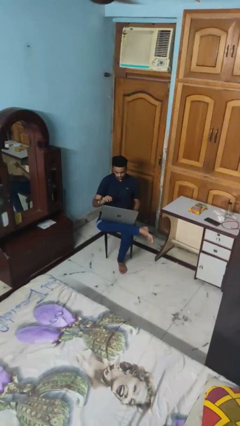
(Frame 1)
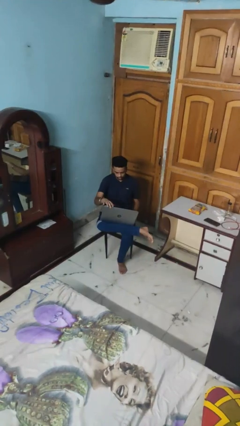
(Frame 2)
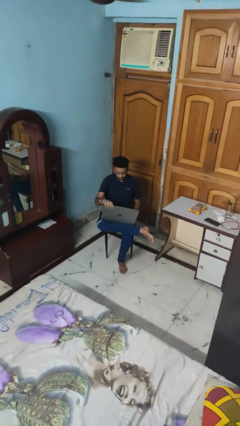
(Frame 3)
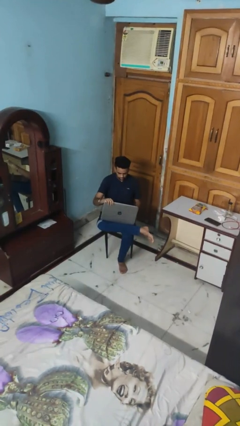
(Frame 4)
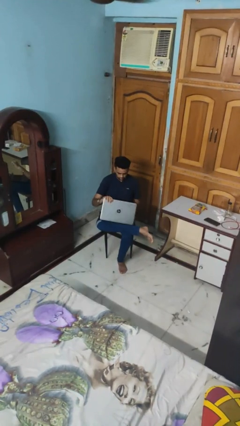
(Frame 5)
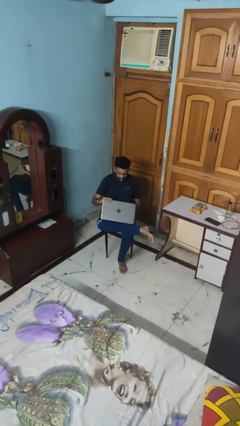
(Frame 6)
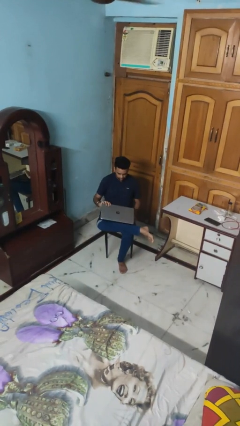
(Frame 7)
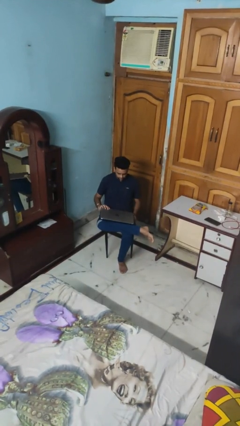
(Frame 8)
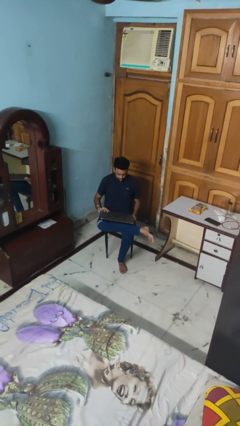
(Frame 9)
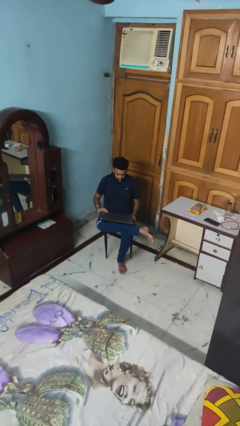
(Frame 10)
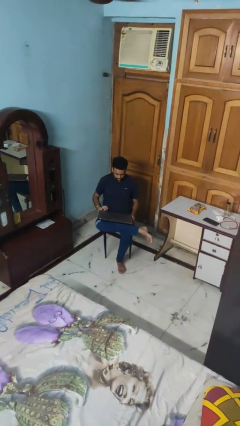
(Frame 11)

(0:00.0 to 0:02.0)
person closes laptop

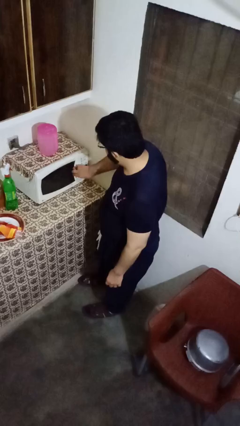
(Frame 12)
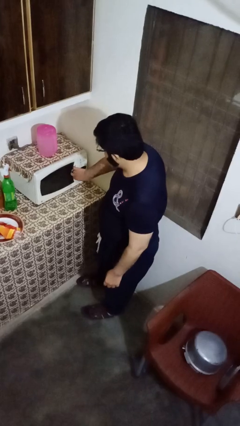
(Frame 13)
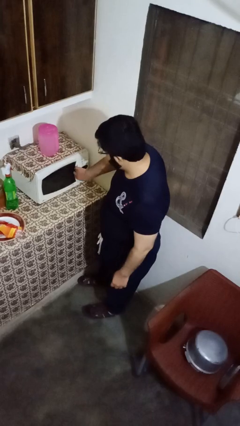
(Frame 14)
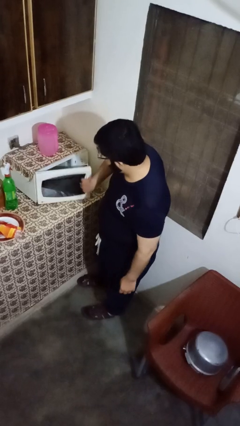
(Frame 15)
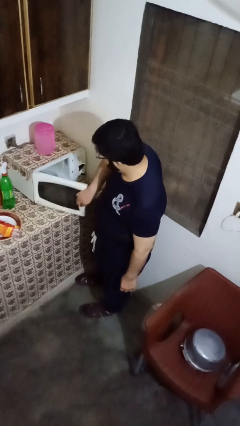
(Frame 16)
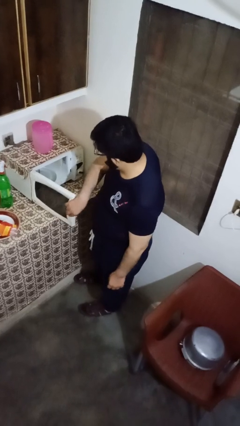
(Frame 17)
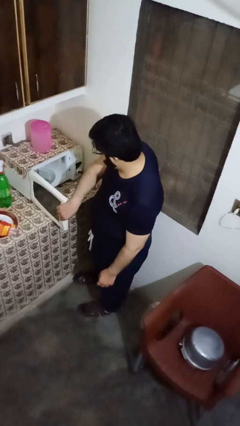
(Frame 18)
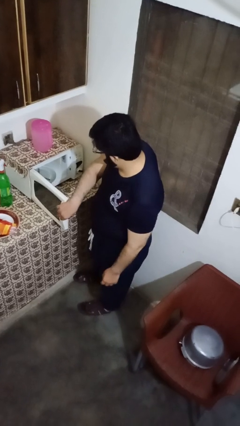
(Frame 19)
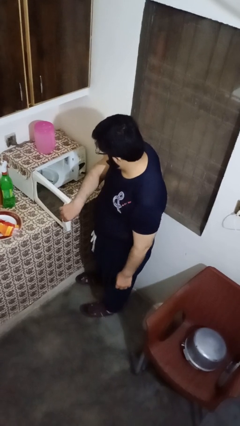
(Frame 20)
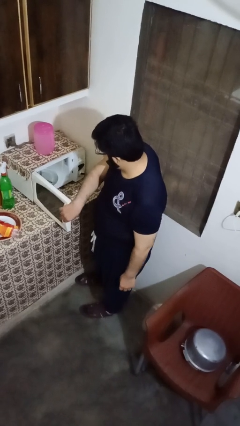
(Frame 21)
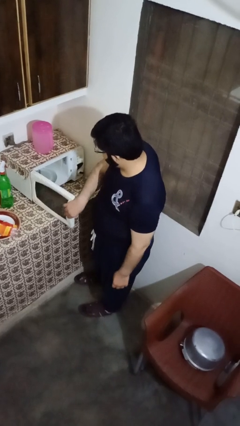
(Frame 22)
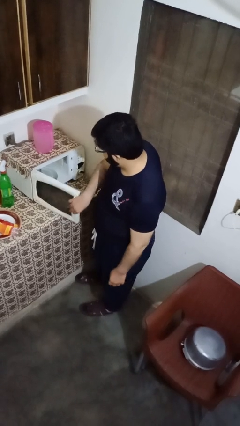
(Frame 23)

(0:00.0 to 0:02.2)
person opens oven door

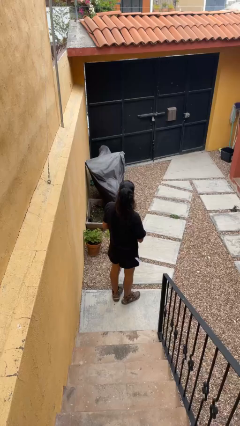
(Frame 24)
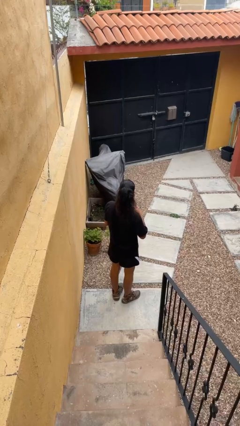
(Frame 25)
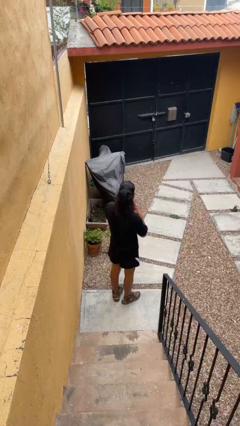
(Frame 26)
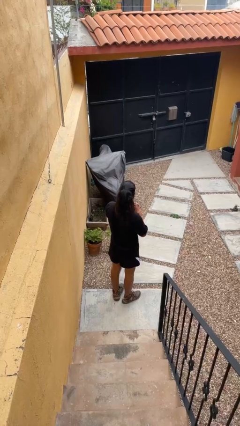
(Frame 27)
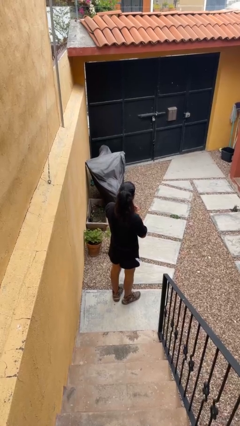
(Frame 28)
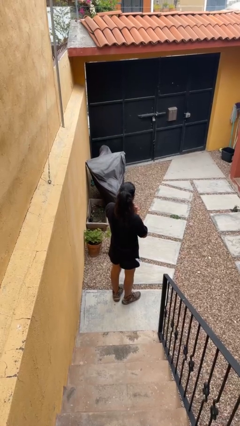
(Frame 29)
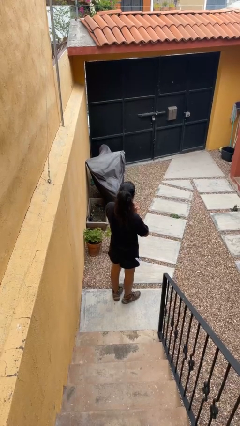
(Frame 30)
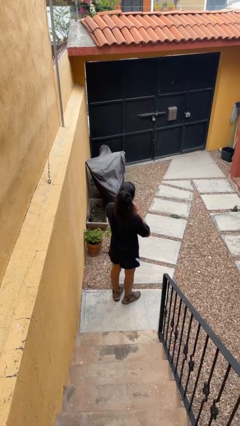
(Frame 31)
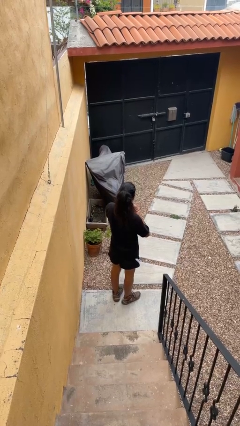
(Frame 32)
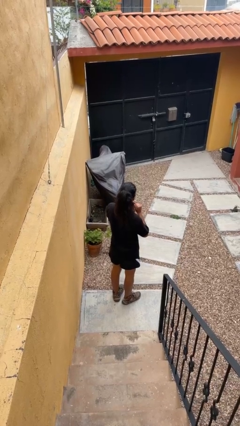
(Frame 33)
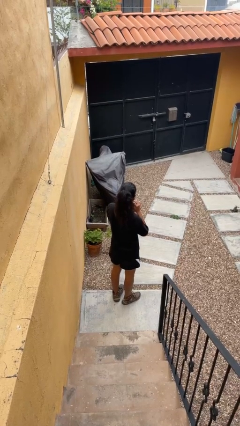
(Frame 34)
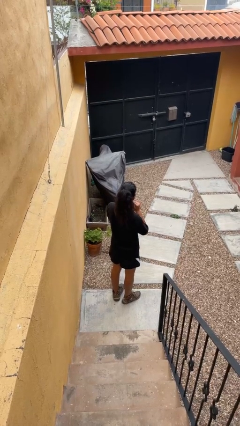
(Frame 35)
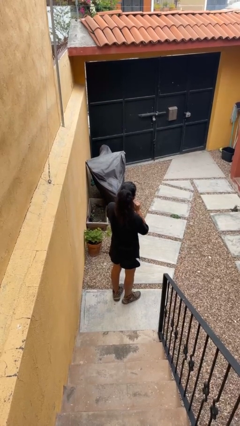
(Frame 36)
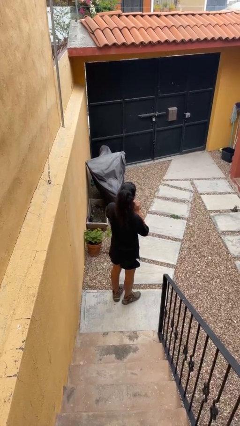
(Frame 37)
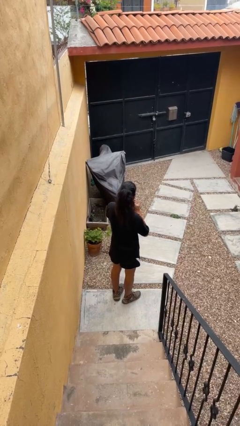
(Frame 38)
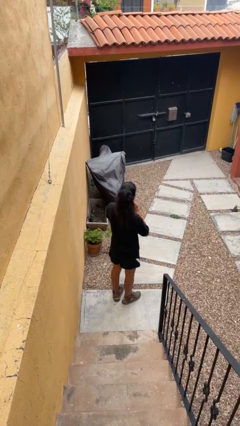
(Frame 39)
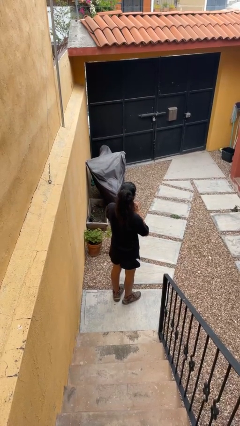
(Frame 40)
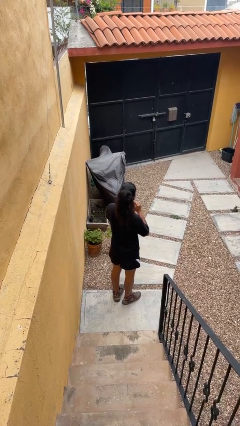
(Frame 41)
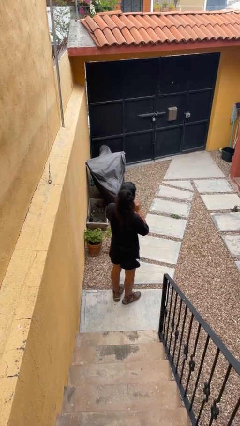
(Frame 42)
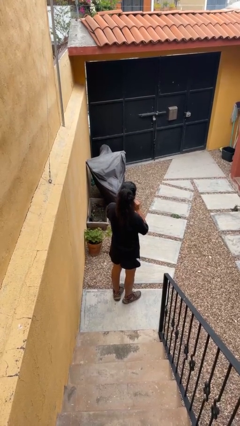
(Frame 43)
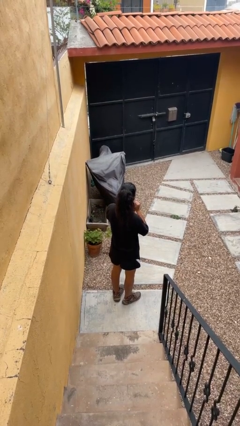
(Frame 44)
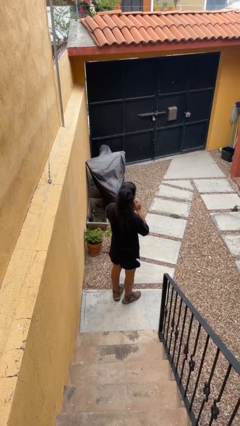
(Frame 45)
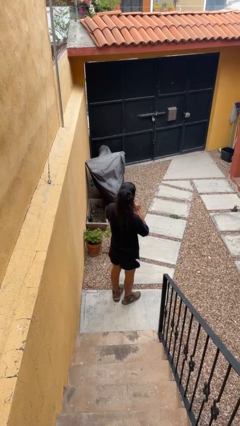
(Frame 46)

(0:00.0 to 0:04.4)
person cracks knuckles

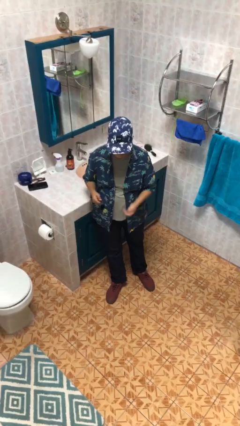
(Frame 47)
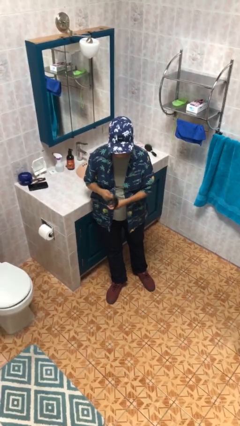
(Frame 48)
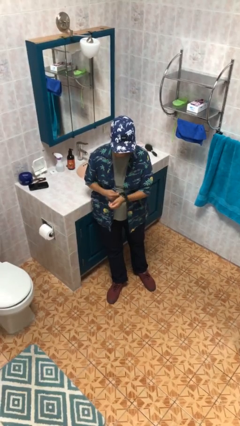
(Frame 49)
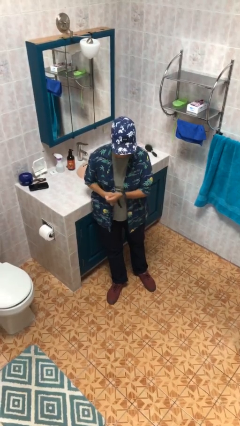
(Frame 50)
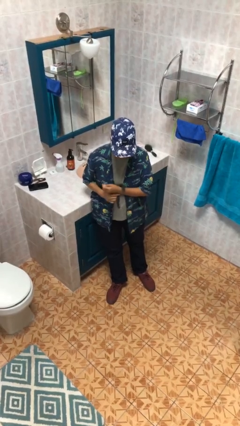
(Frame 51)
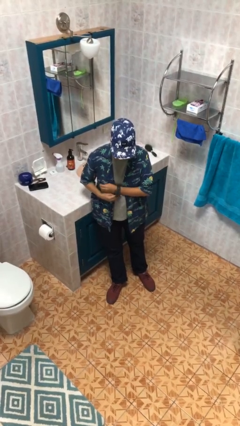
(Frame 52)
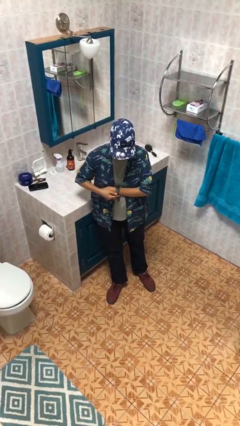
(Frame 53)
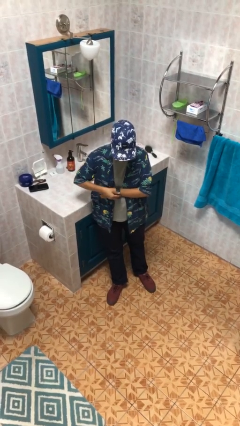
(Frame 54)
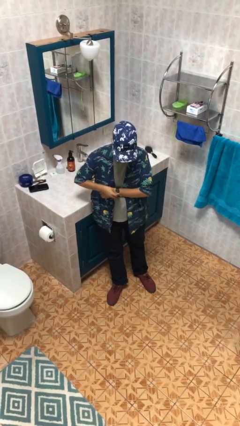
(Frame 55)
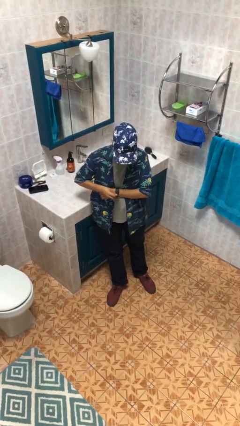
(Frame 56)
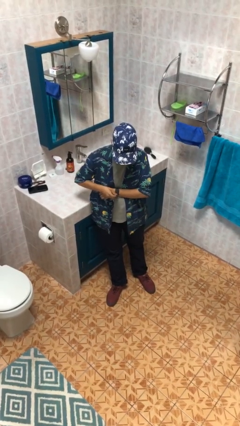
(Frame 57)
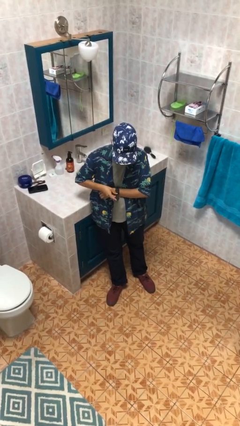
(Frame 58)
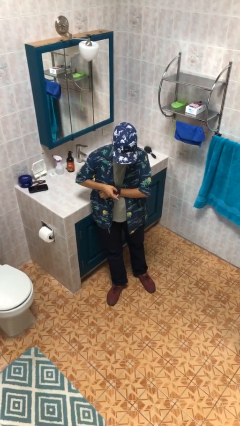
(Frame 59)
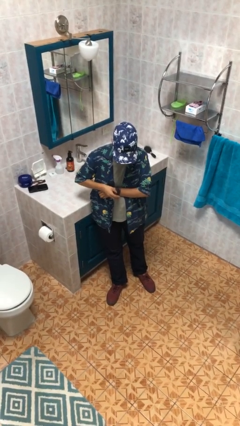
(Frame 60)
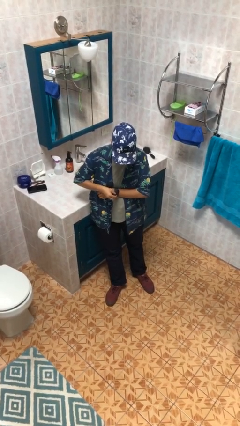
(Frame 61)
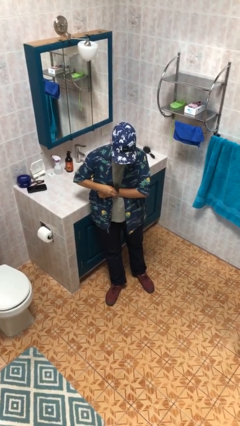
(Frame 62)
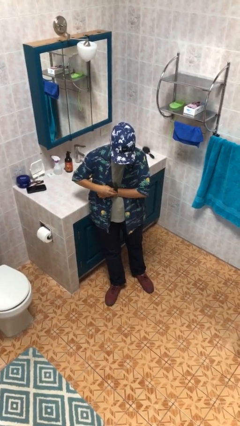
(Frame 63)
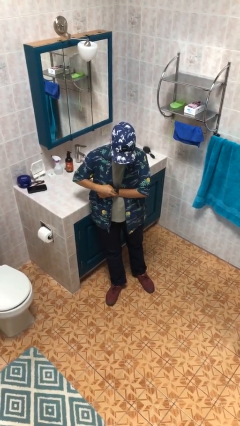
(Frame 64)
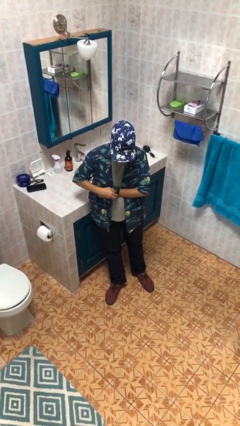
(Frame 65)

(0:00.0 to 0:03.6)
person puts on wristwatch

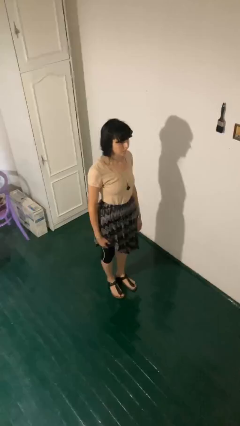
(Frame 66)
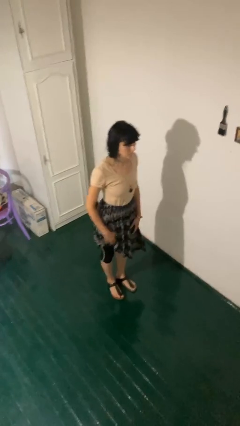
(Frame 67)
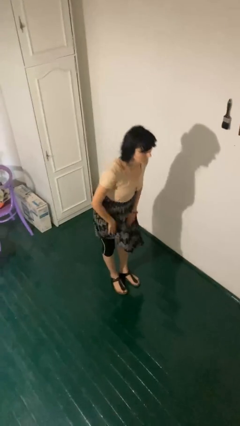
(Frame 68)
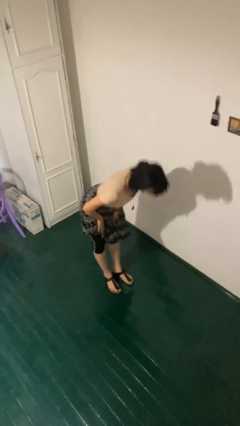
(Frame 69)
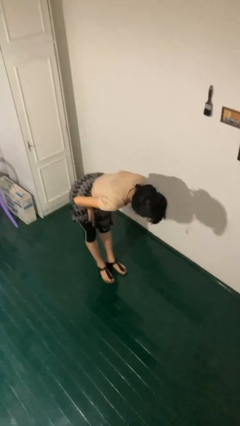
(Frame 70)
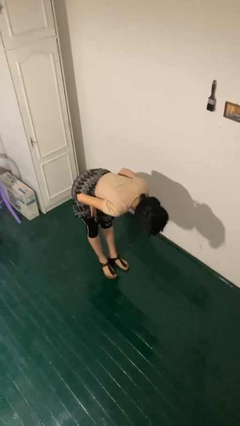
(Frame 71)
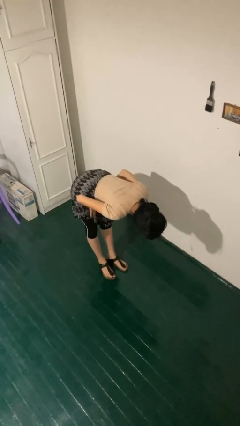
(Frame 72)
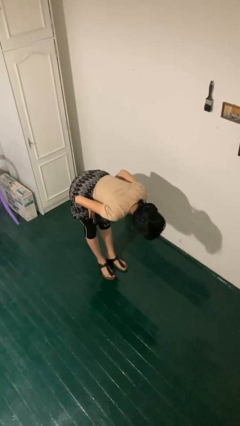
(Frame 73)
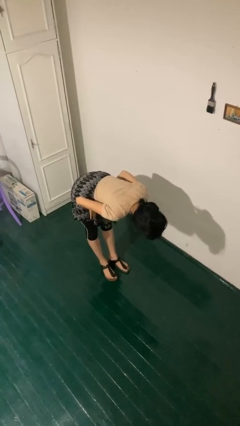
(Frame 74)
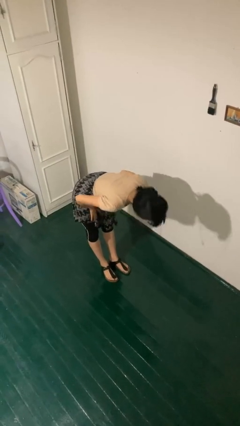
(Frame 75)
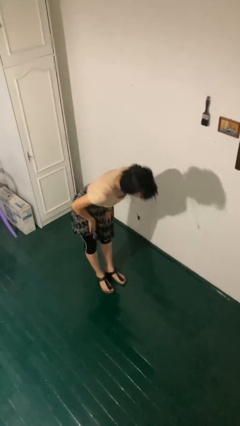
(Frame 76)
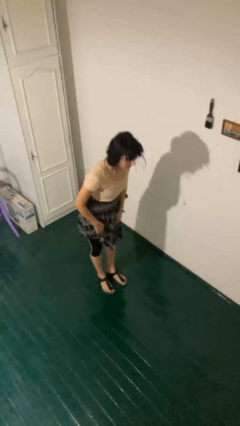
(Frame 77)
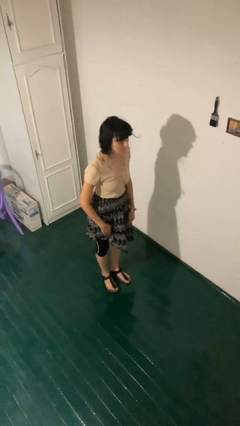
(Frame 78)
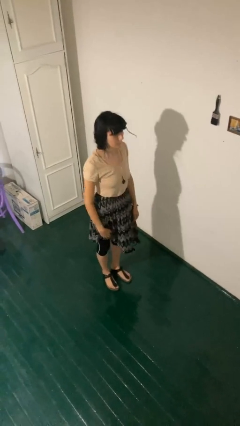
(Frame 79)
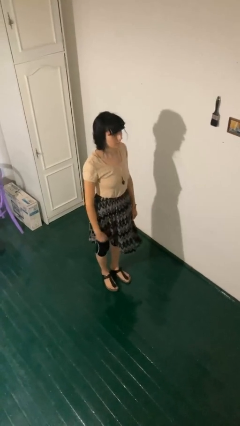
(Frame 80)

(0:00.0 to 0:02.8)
person bows

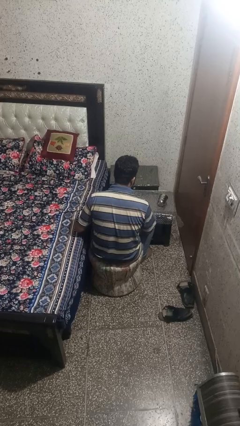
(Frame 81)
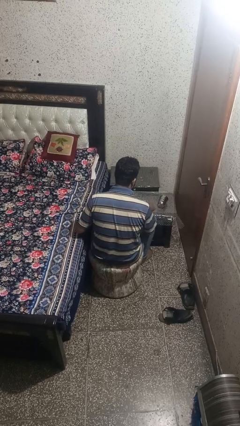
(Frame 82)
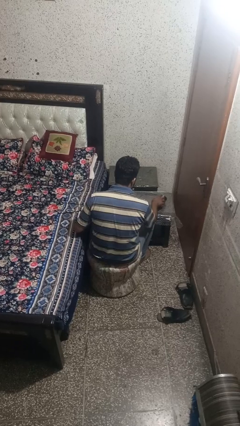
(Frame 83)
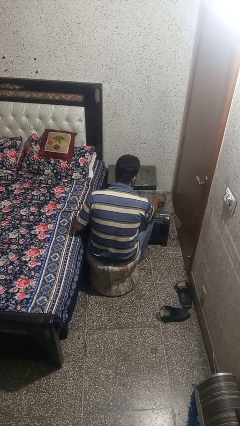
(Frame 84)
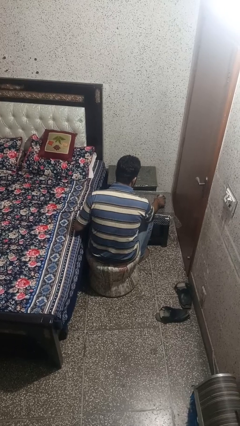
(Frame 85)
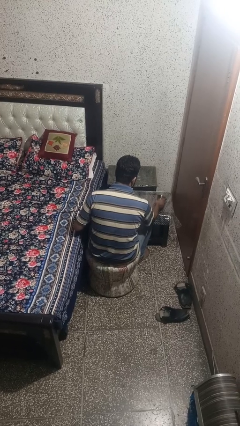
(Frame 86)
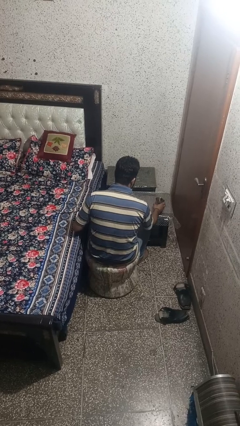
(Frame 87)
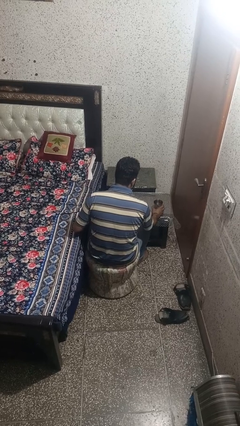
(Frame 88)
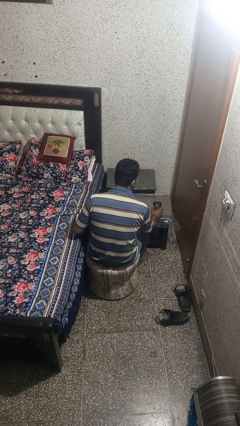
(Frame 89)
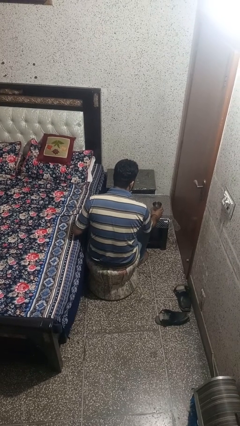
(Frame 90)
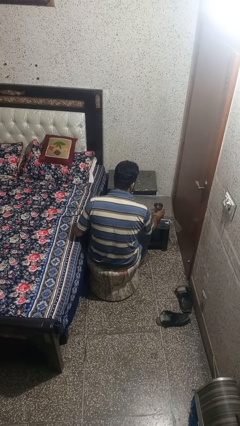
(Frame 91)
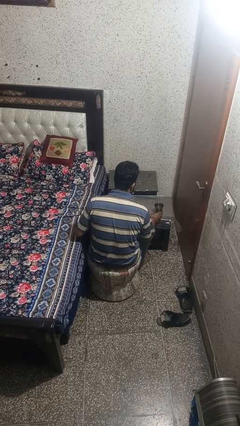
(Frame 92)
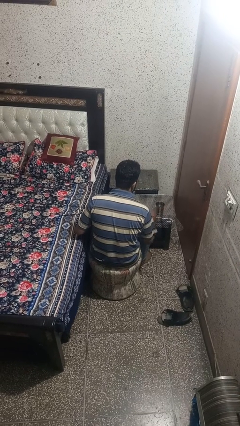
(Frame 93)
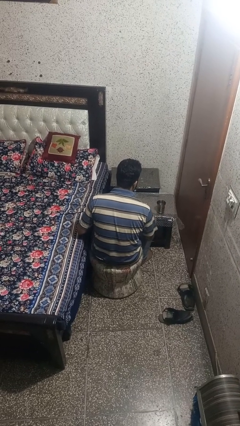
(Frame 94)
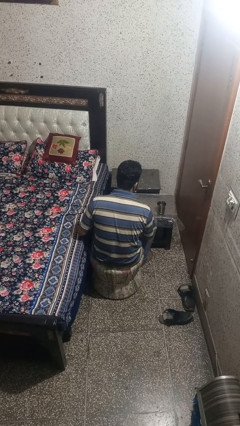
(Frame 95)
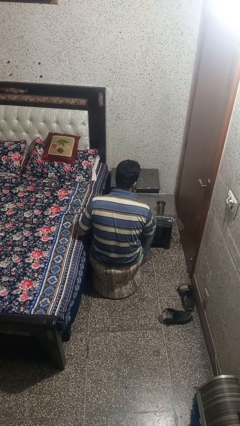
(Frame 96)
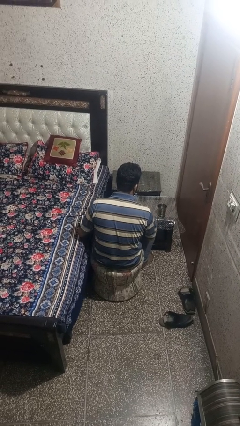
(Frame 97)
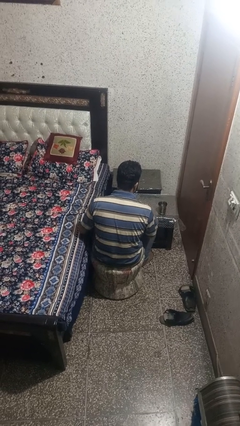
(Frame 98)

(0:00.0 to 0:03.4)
person sets upright glass
